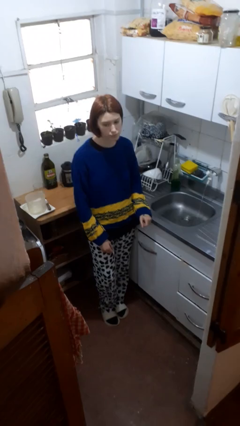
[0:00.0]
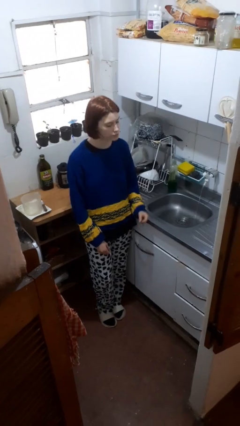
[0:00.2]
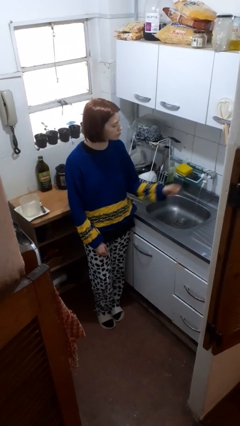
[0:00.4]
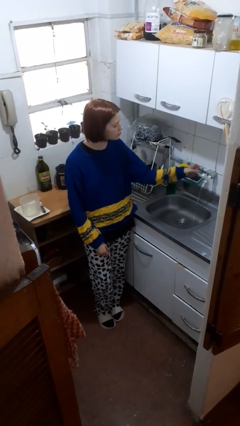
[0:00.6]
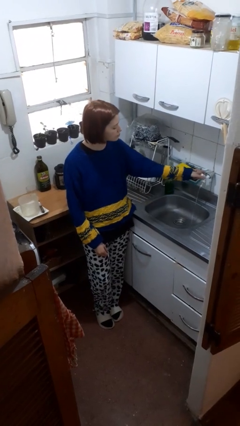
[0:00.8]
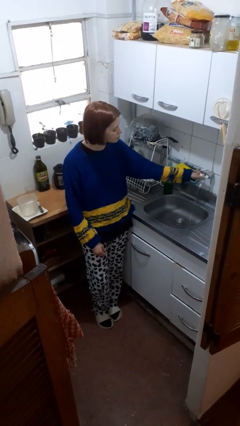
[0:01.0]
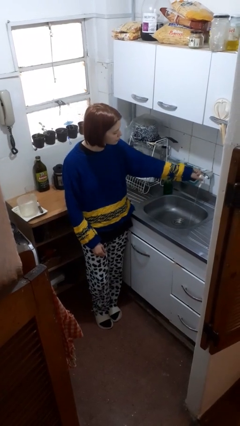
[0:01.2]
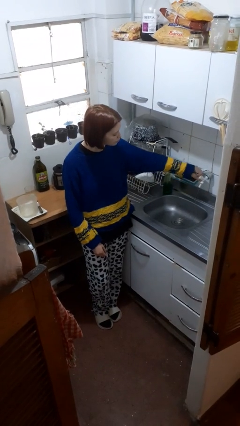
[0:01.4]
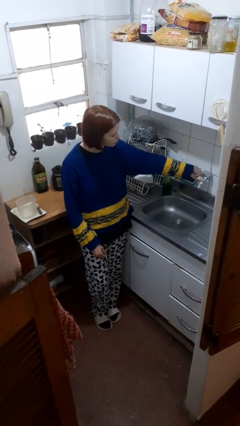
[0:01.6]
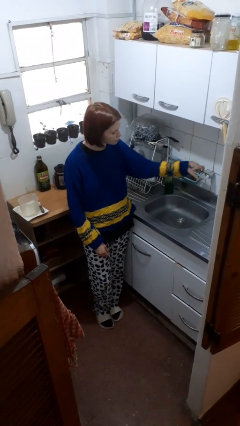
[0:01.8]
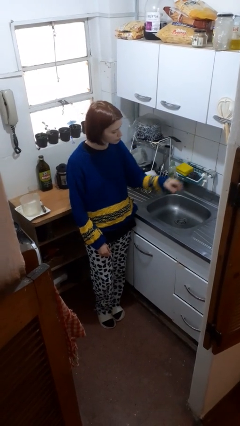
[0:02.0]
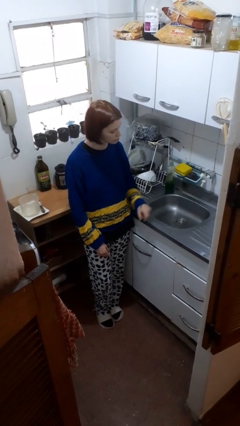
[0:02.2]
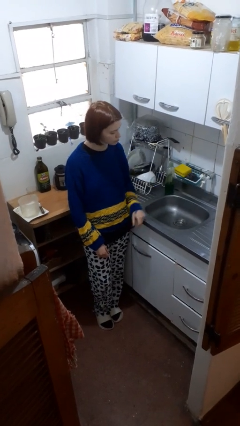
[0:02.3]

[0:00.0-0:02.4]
person turns off faucet

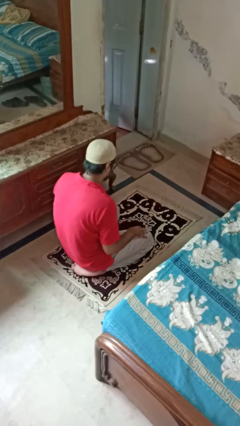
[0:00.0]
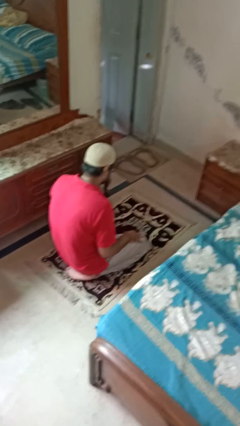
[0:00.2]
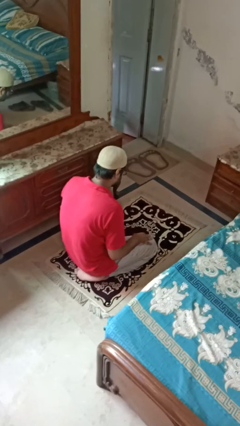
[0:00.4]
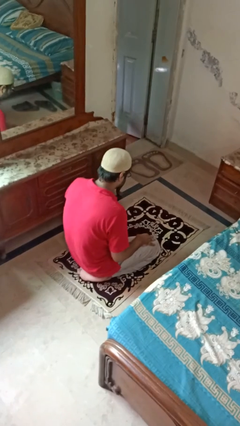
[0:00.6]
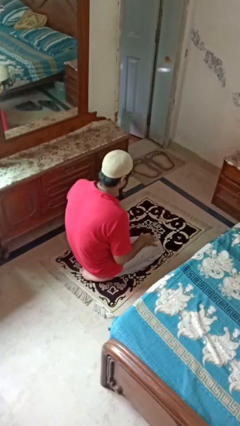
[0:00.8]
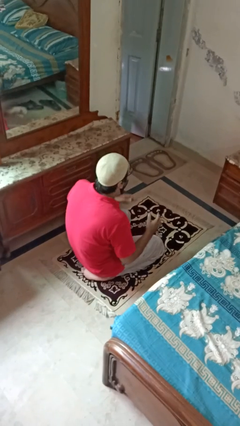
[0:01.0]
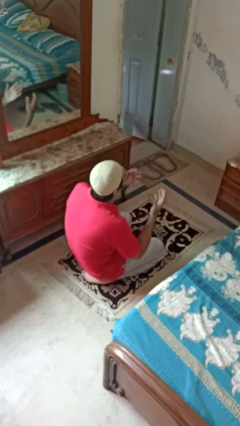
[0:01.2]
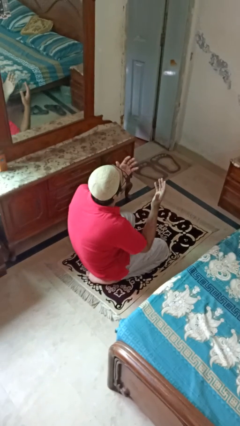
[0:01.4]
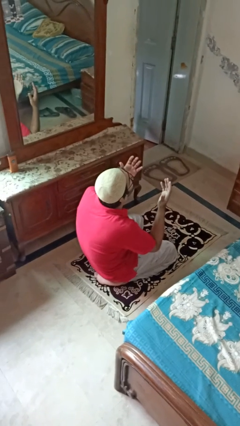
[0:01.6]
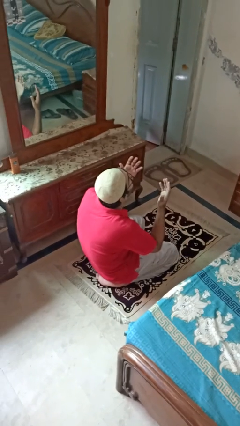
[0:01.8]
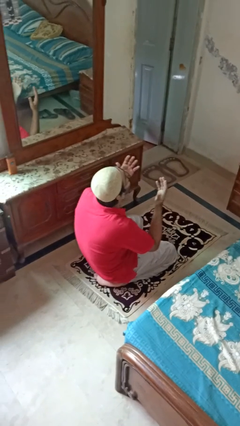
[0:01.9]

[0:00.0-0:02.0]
person prays

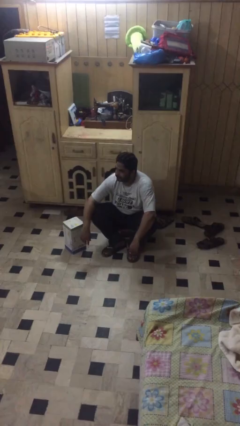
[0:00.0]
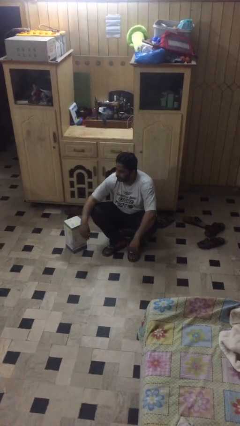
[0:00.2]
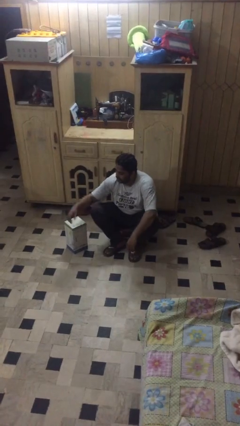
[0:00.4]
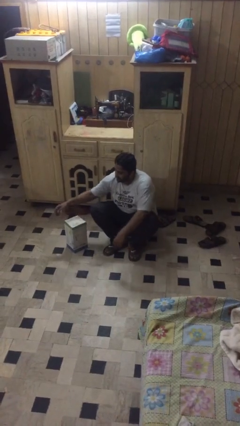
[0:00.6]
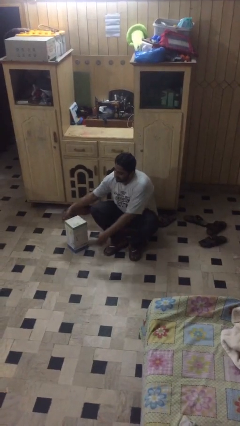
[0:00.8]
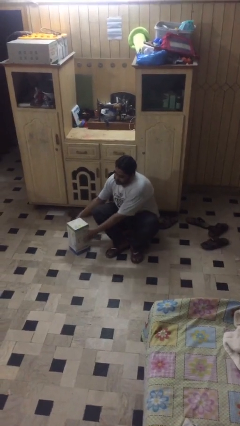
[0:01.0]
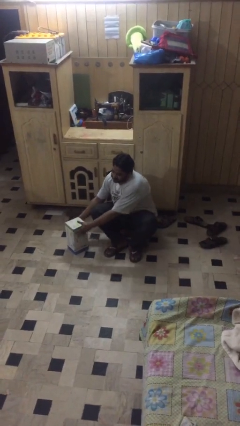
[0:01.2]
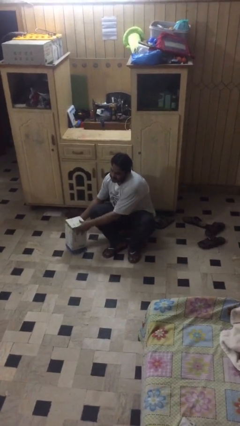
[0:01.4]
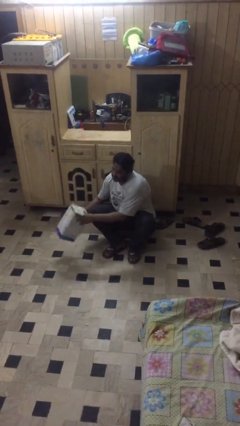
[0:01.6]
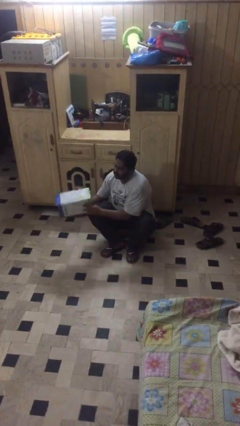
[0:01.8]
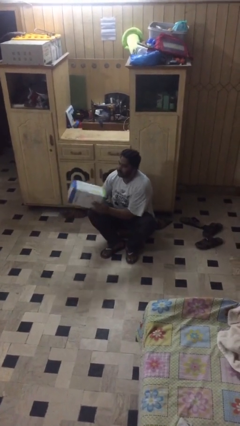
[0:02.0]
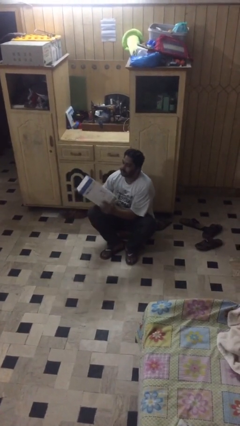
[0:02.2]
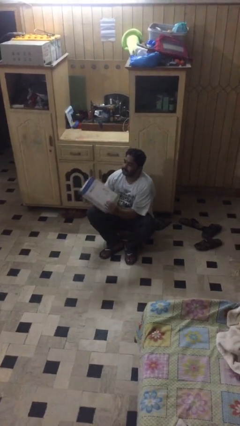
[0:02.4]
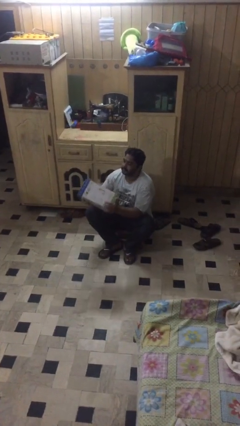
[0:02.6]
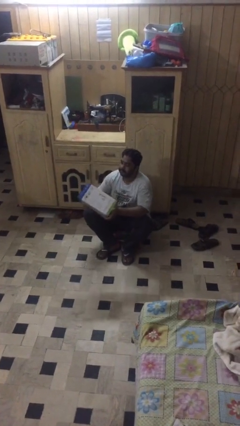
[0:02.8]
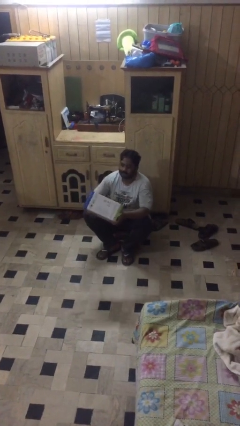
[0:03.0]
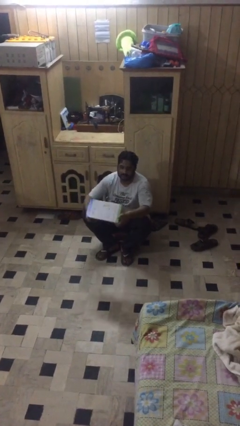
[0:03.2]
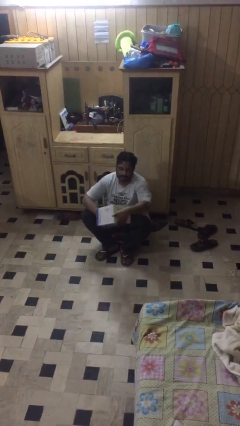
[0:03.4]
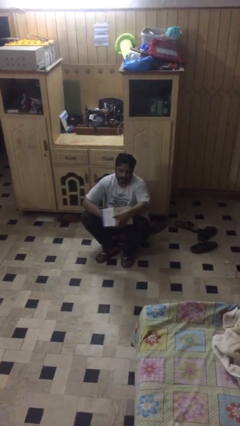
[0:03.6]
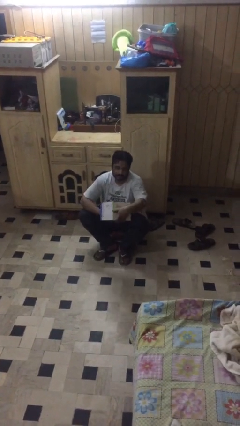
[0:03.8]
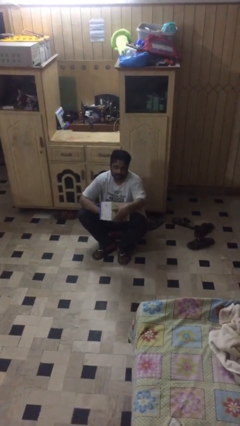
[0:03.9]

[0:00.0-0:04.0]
person picks up object from floor

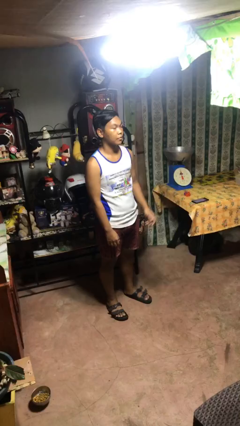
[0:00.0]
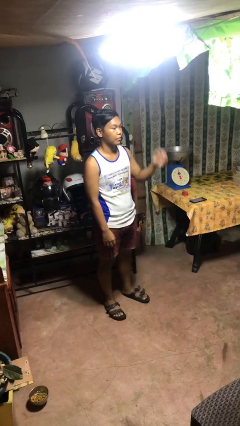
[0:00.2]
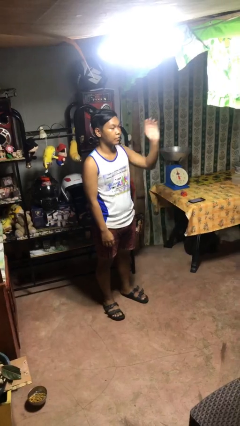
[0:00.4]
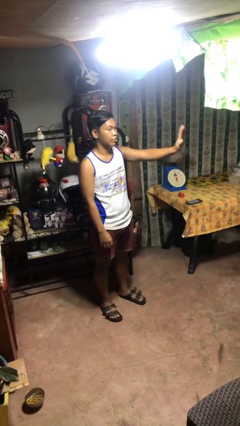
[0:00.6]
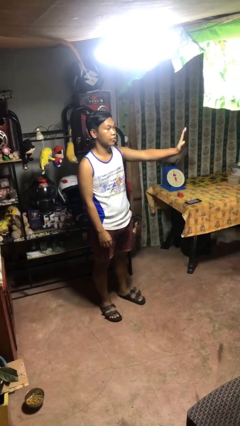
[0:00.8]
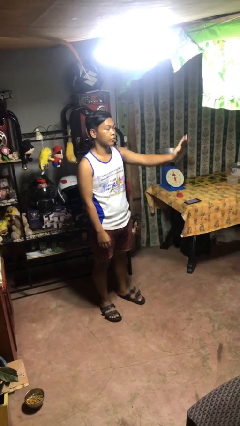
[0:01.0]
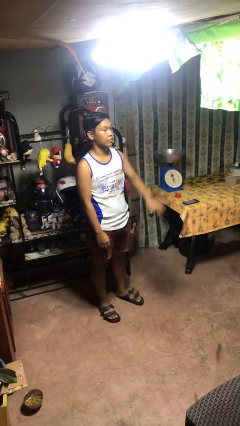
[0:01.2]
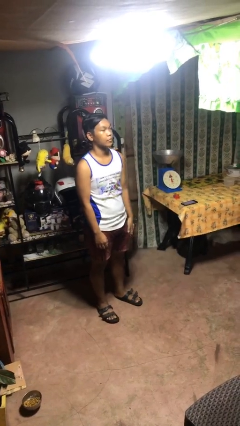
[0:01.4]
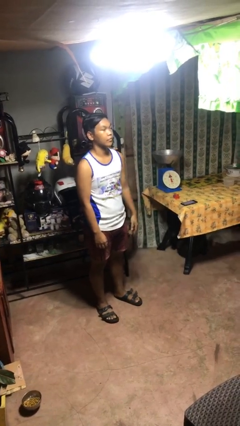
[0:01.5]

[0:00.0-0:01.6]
person gestures stop

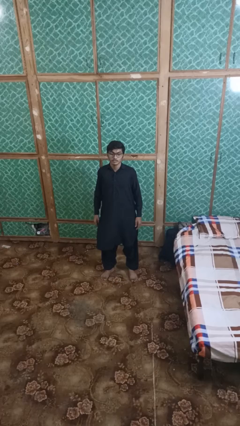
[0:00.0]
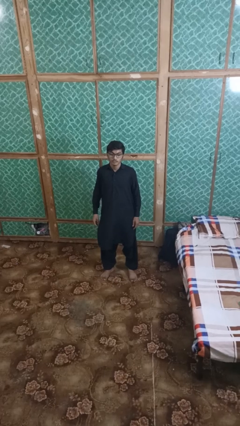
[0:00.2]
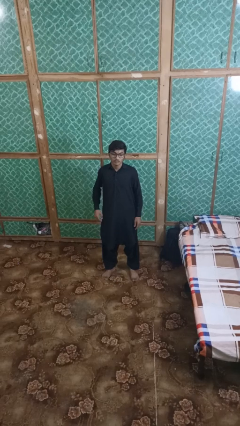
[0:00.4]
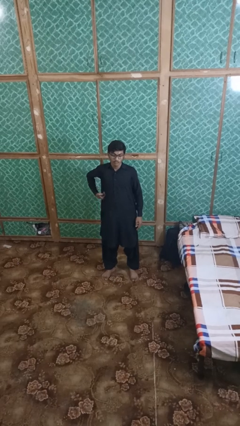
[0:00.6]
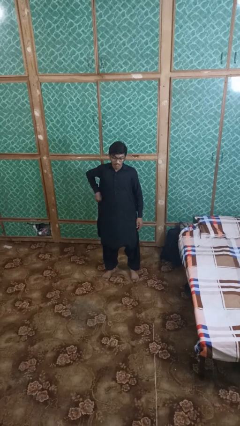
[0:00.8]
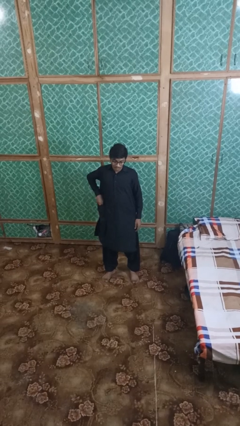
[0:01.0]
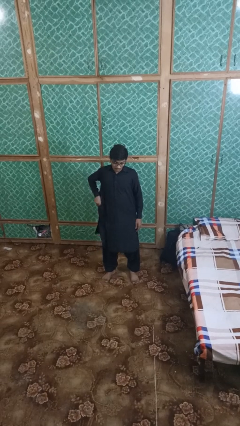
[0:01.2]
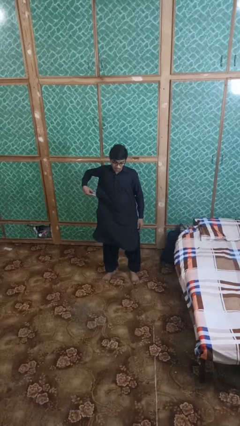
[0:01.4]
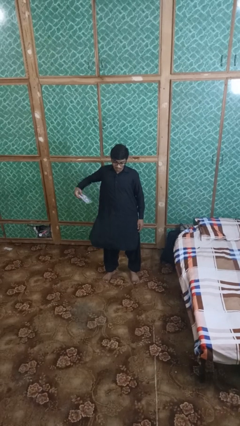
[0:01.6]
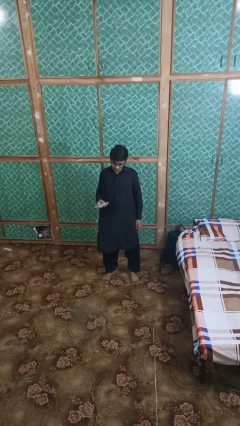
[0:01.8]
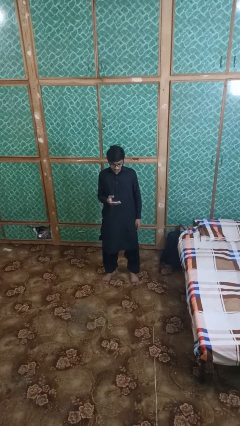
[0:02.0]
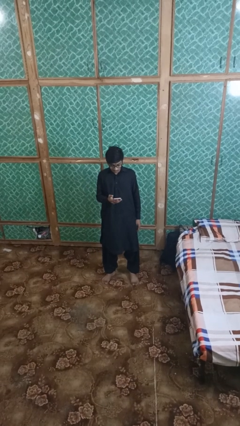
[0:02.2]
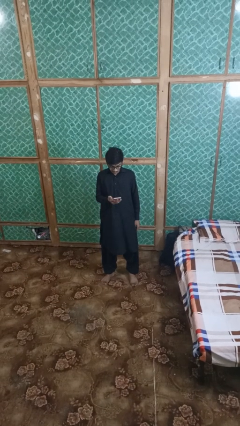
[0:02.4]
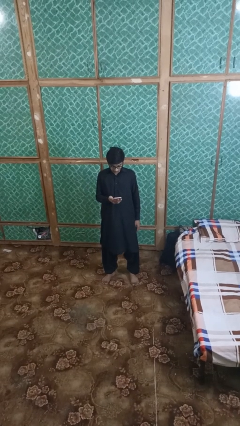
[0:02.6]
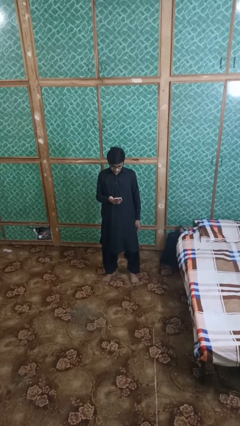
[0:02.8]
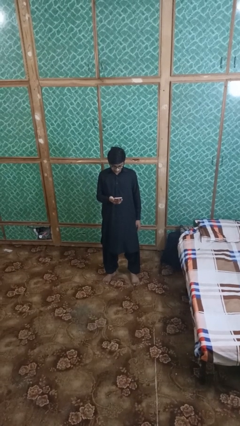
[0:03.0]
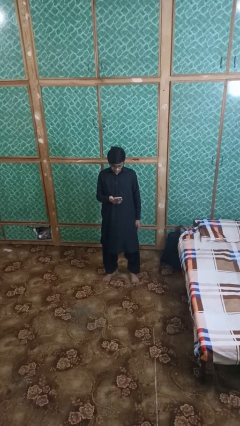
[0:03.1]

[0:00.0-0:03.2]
person takes phone from pocket

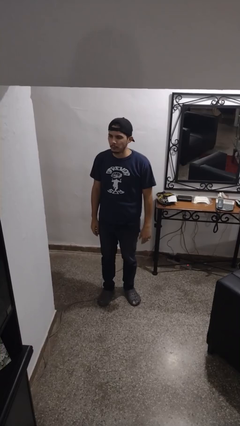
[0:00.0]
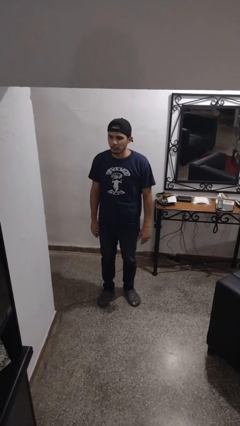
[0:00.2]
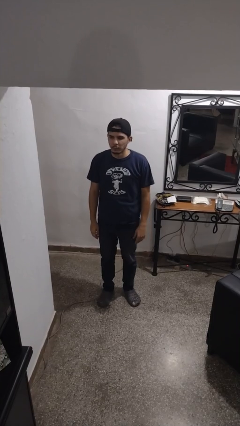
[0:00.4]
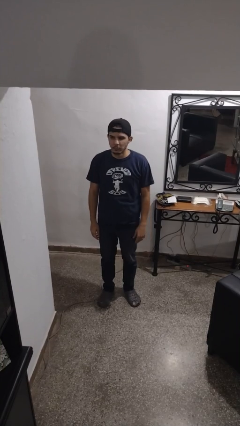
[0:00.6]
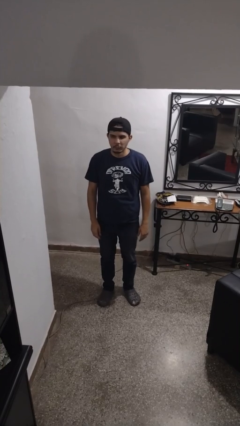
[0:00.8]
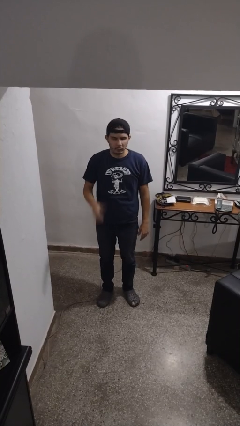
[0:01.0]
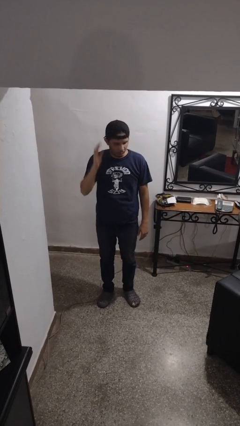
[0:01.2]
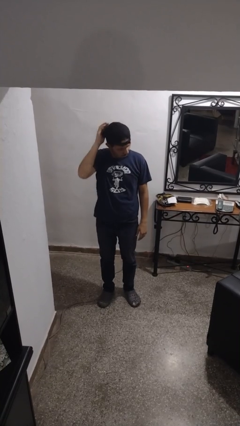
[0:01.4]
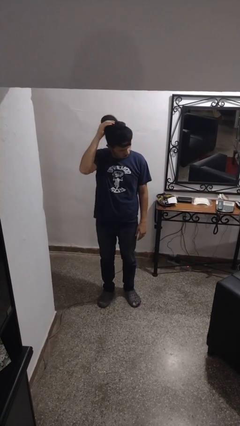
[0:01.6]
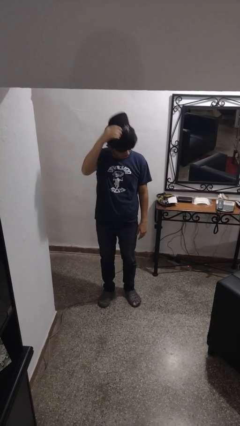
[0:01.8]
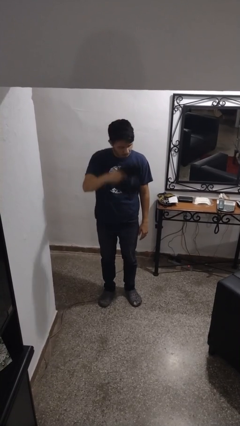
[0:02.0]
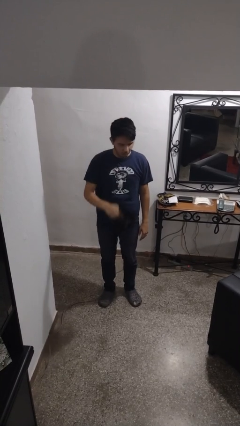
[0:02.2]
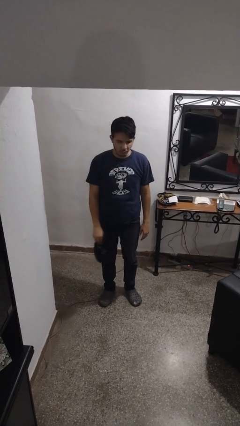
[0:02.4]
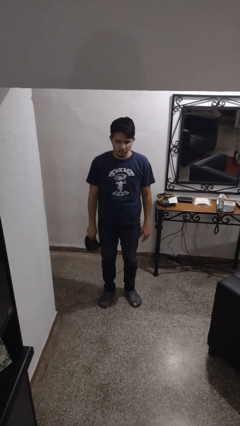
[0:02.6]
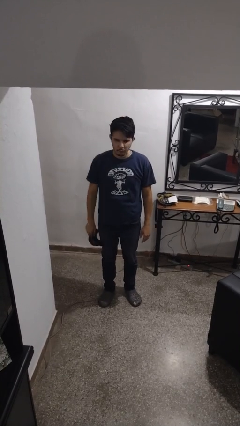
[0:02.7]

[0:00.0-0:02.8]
person takes off hat

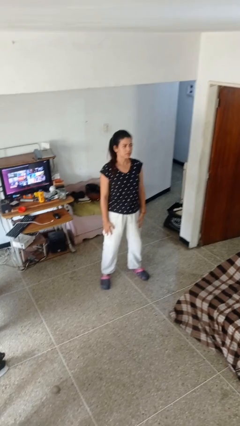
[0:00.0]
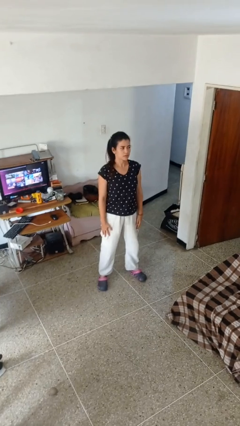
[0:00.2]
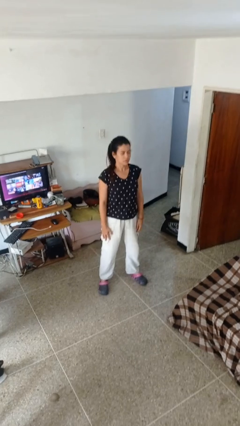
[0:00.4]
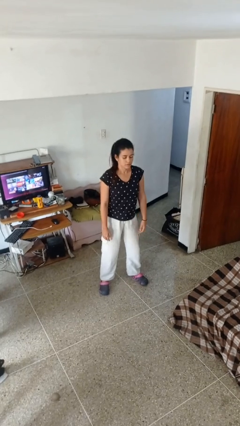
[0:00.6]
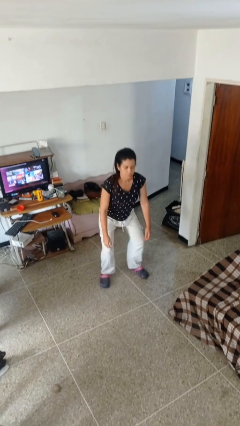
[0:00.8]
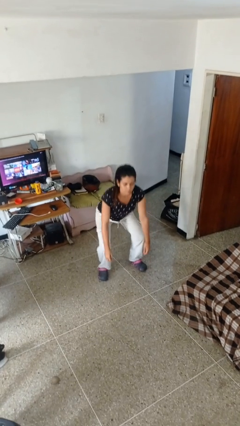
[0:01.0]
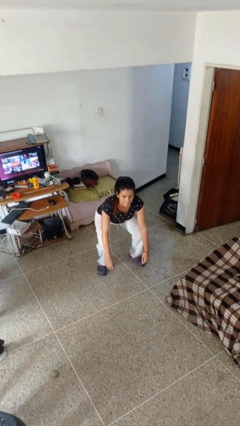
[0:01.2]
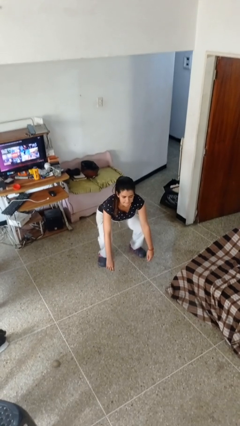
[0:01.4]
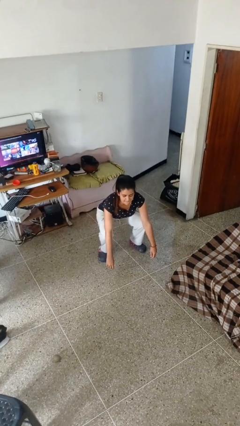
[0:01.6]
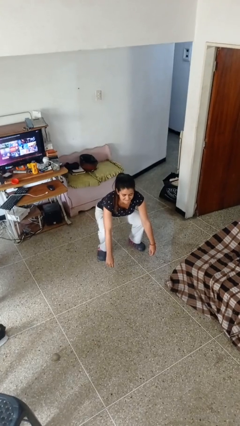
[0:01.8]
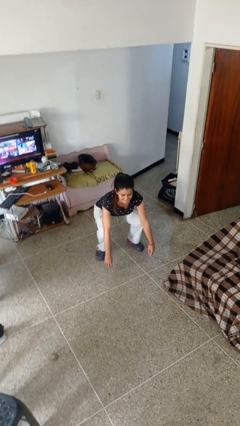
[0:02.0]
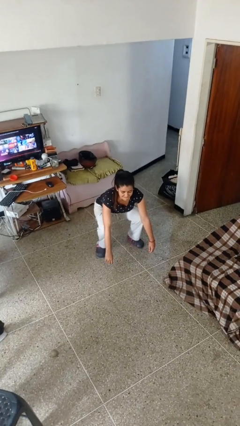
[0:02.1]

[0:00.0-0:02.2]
person squats
